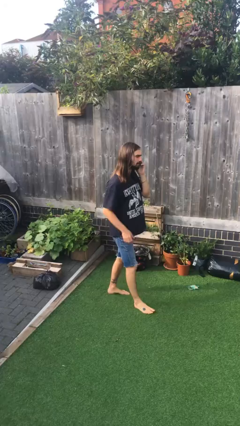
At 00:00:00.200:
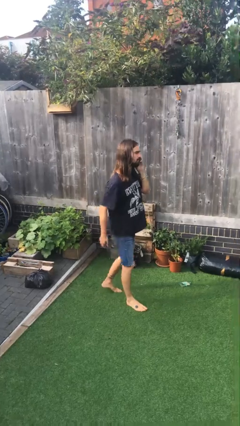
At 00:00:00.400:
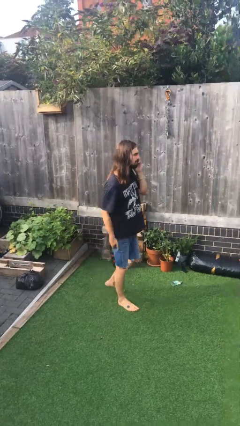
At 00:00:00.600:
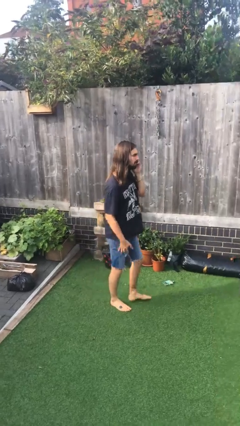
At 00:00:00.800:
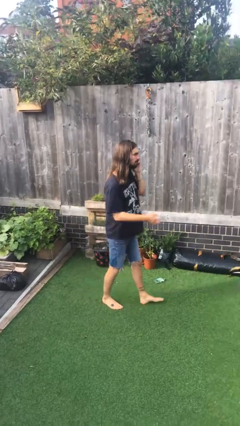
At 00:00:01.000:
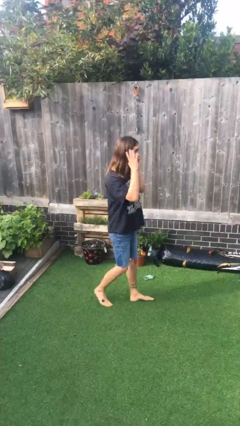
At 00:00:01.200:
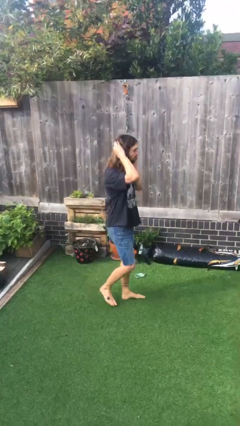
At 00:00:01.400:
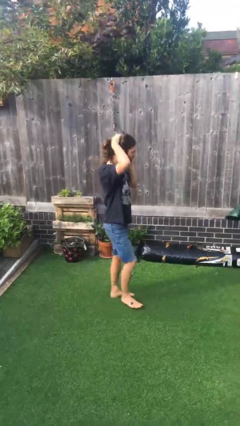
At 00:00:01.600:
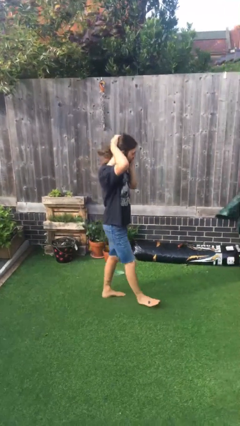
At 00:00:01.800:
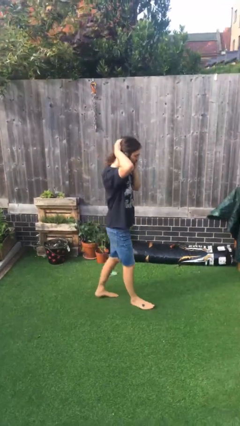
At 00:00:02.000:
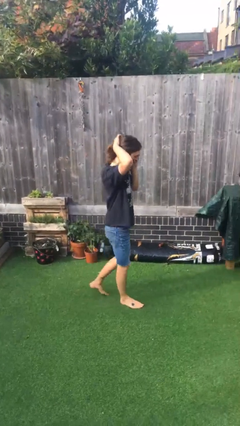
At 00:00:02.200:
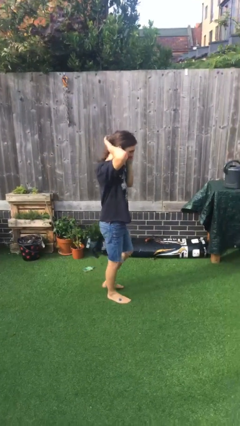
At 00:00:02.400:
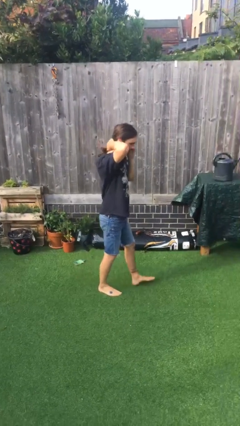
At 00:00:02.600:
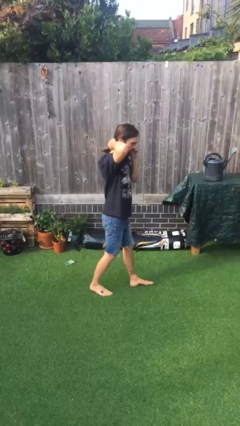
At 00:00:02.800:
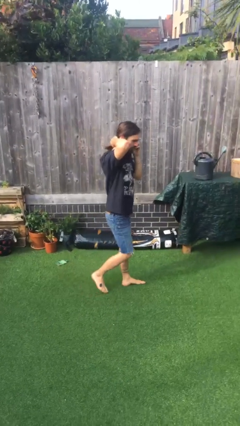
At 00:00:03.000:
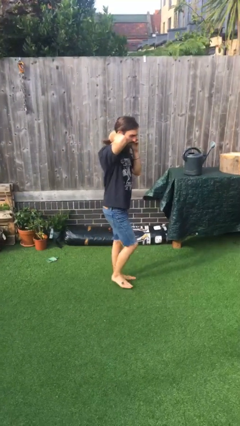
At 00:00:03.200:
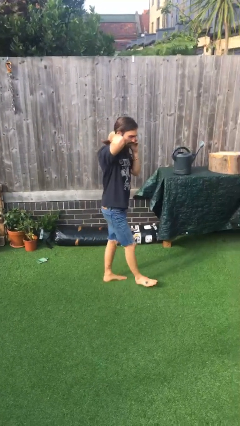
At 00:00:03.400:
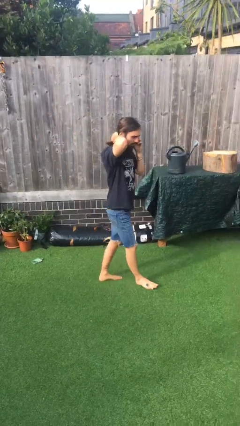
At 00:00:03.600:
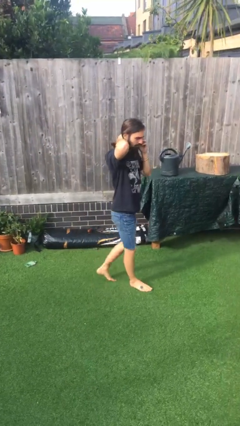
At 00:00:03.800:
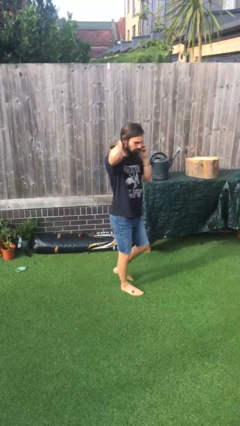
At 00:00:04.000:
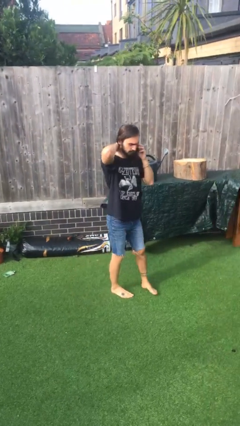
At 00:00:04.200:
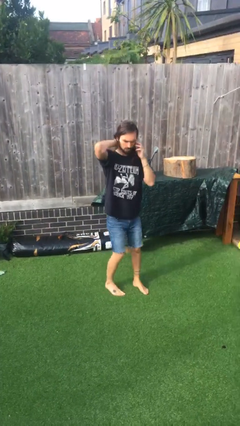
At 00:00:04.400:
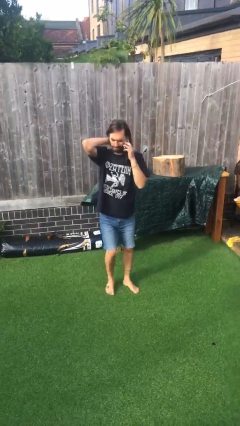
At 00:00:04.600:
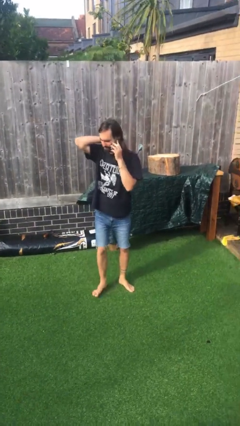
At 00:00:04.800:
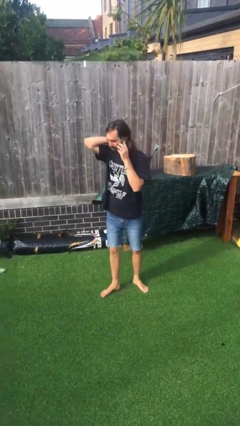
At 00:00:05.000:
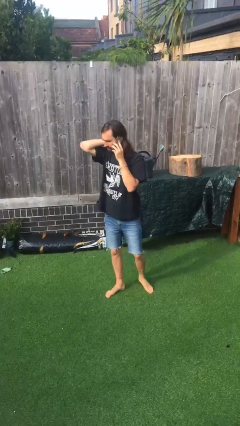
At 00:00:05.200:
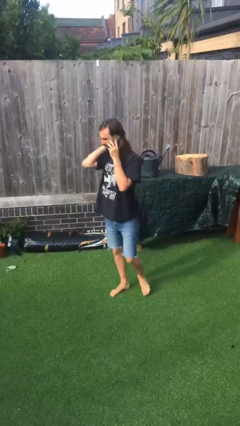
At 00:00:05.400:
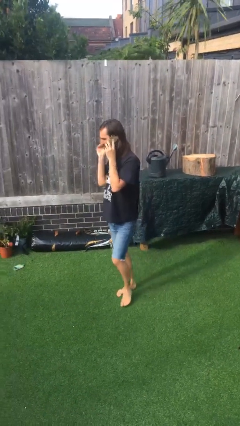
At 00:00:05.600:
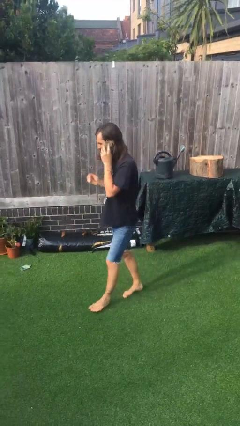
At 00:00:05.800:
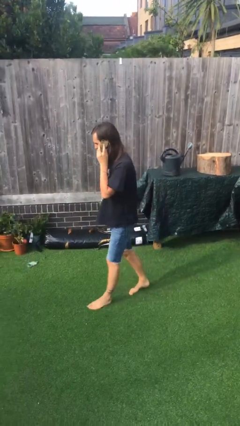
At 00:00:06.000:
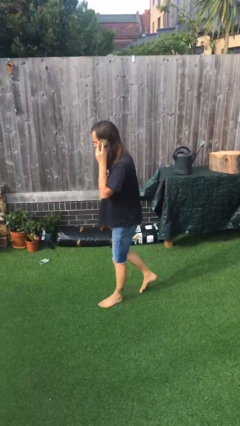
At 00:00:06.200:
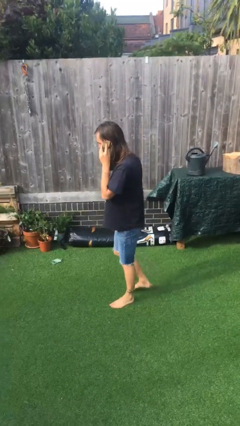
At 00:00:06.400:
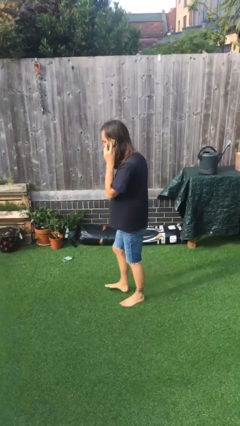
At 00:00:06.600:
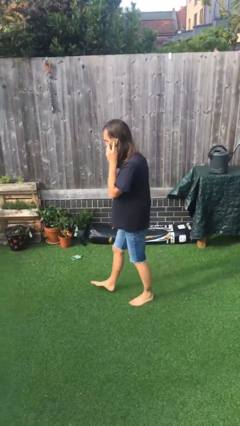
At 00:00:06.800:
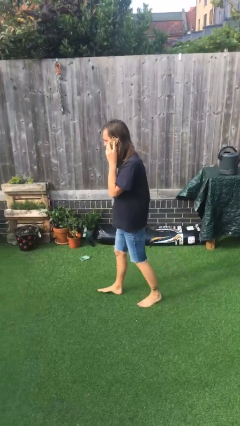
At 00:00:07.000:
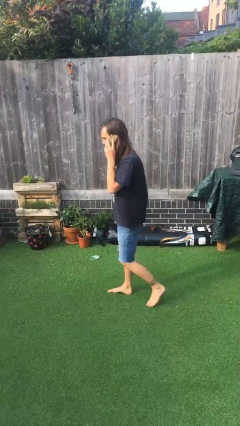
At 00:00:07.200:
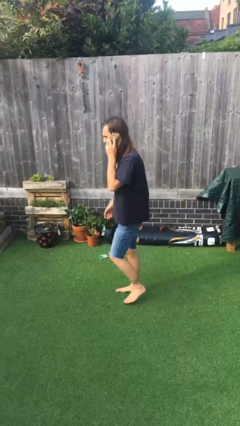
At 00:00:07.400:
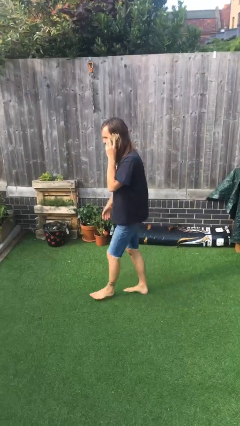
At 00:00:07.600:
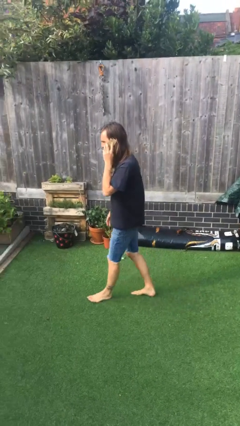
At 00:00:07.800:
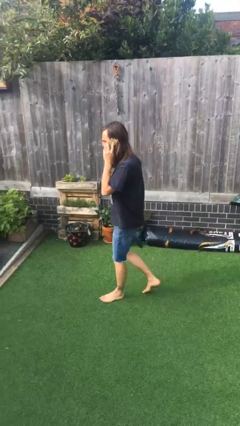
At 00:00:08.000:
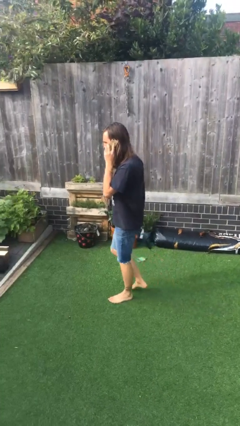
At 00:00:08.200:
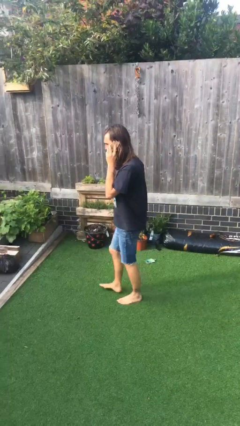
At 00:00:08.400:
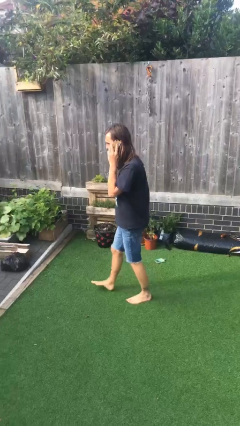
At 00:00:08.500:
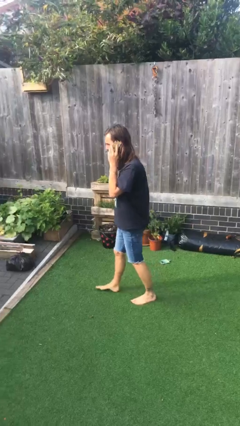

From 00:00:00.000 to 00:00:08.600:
person talks on phone

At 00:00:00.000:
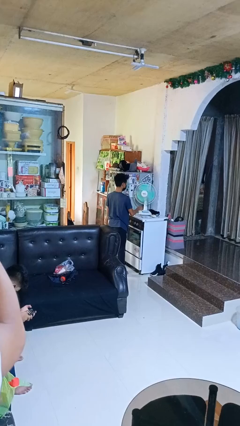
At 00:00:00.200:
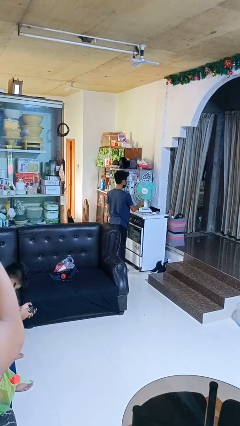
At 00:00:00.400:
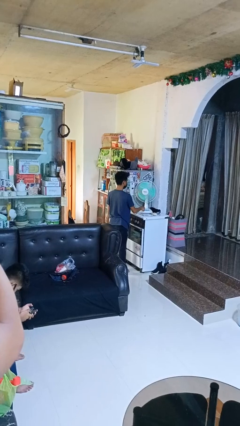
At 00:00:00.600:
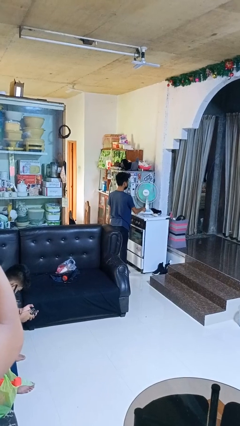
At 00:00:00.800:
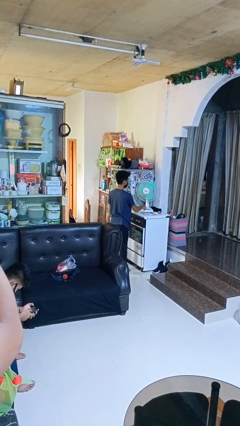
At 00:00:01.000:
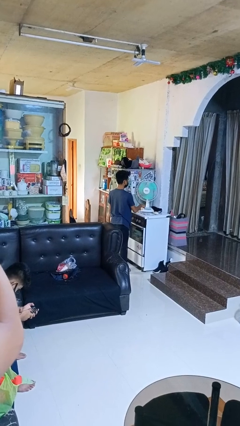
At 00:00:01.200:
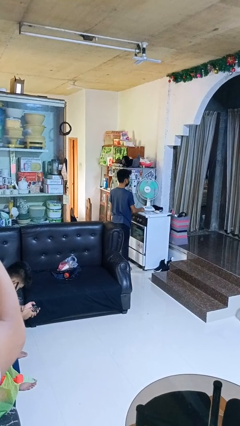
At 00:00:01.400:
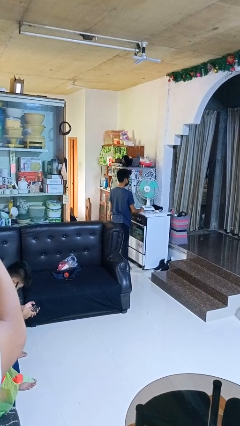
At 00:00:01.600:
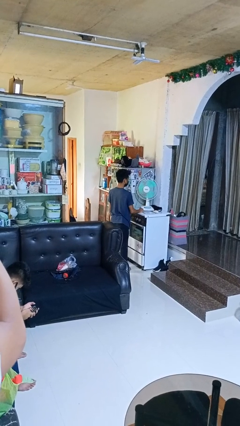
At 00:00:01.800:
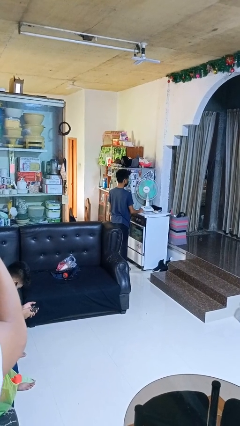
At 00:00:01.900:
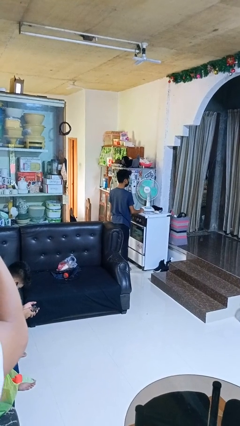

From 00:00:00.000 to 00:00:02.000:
person turns off fan

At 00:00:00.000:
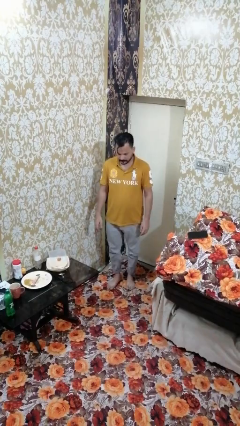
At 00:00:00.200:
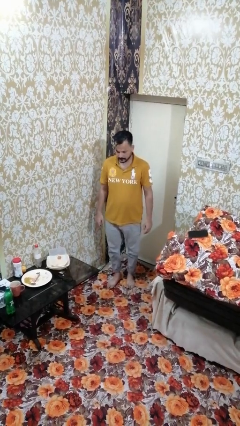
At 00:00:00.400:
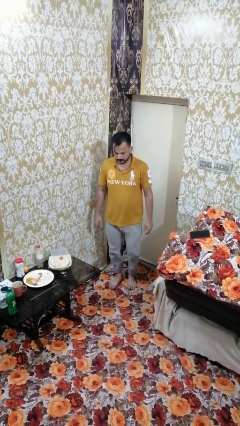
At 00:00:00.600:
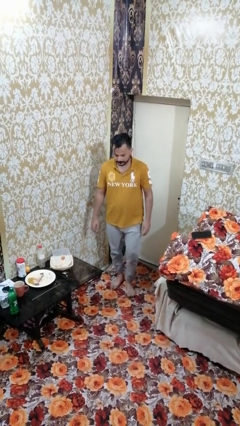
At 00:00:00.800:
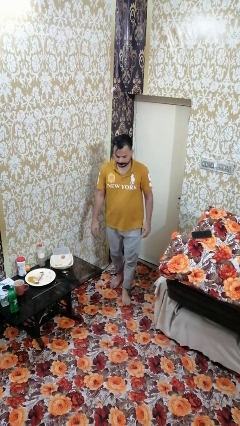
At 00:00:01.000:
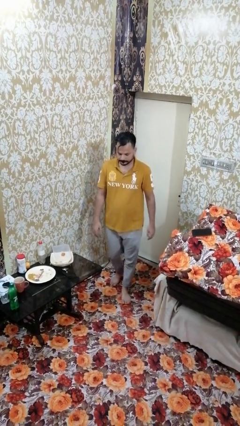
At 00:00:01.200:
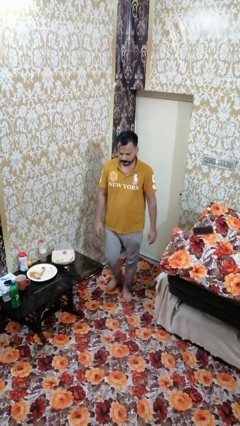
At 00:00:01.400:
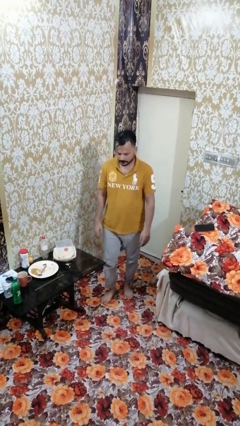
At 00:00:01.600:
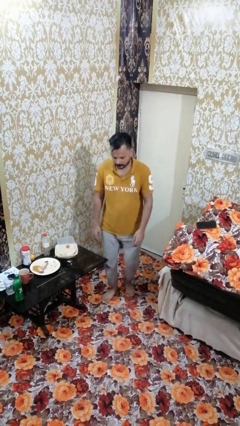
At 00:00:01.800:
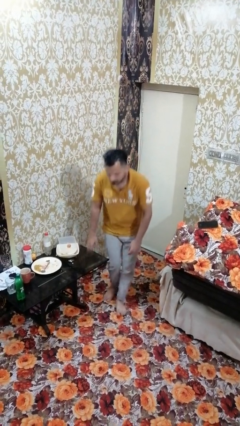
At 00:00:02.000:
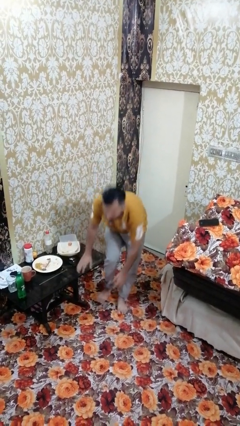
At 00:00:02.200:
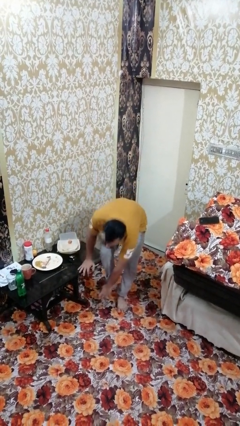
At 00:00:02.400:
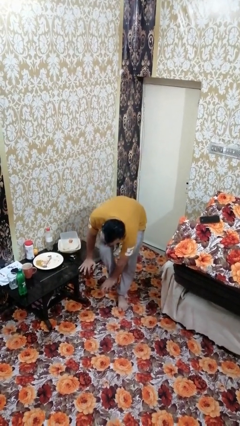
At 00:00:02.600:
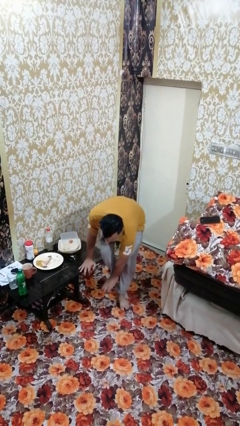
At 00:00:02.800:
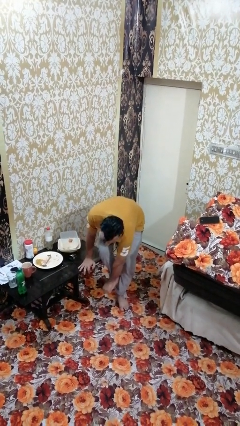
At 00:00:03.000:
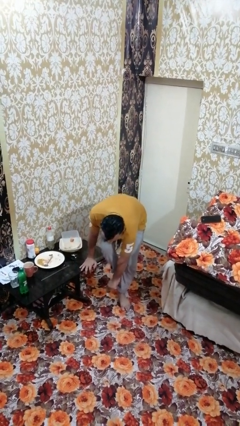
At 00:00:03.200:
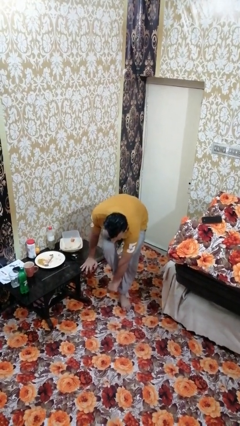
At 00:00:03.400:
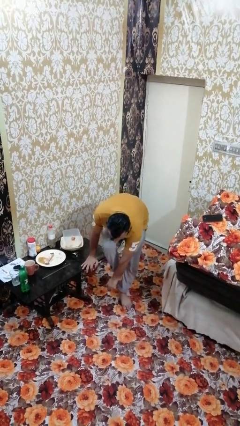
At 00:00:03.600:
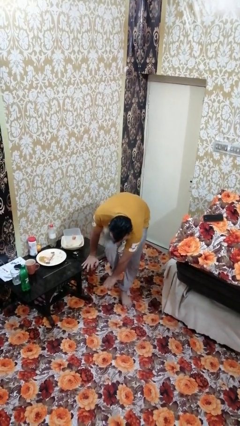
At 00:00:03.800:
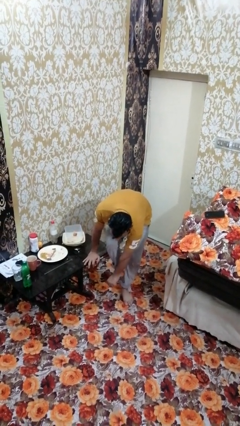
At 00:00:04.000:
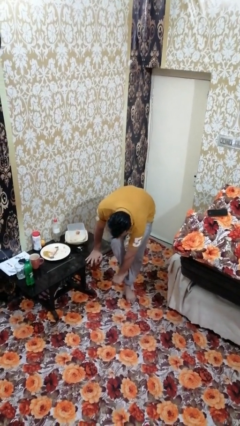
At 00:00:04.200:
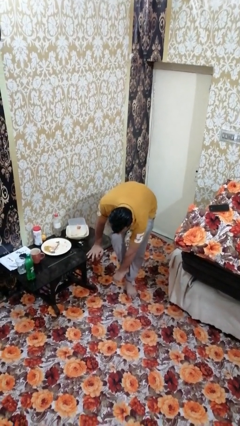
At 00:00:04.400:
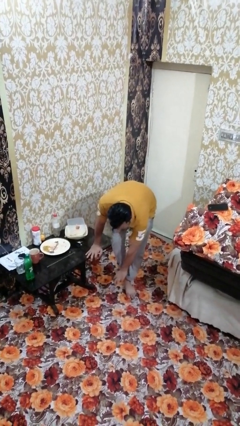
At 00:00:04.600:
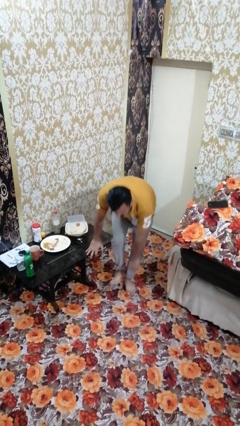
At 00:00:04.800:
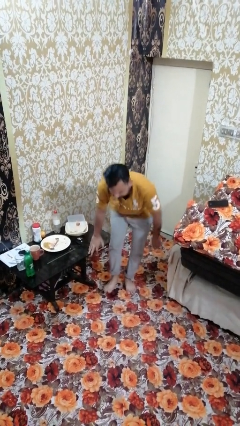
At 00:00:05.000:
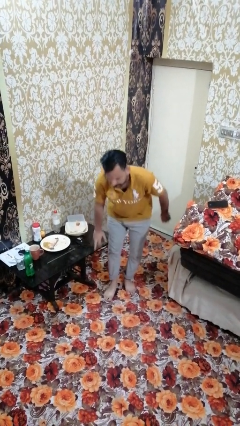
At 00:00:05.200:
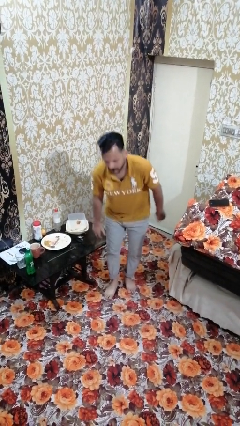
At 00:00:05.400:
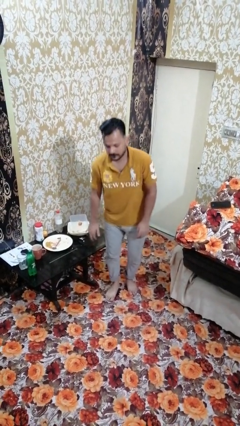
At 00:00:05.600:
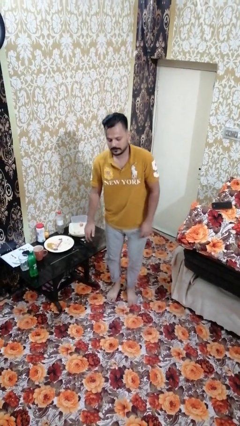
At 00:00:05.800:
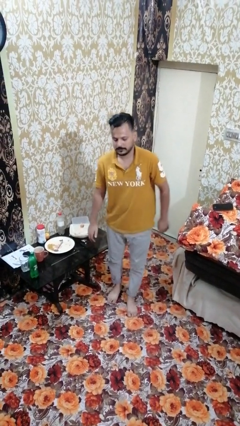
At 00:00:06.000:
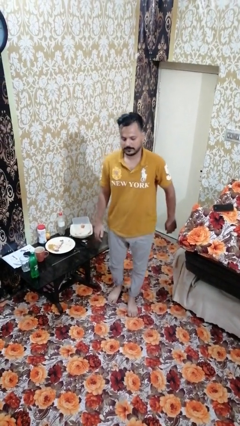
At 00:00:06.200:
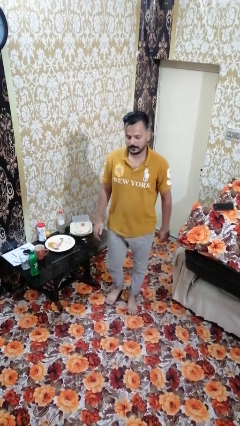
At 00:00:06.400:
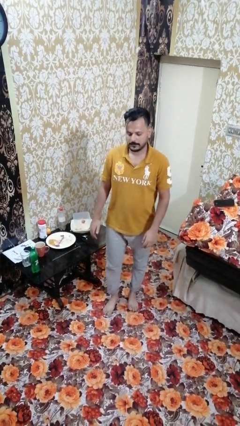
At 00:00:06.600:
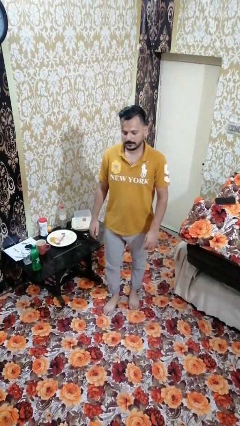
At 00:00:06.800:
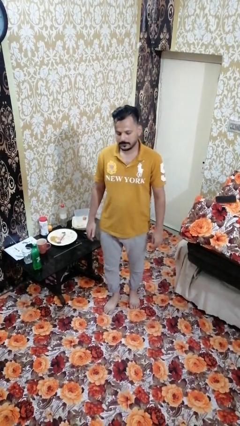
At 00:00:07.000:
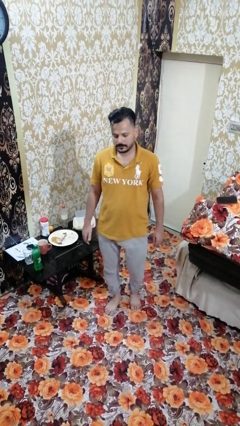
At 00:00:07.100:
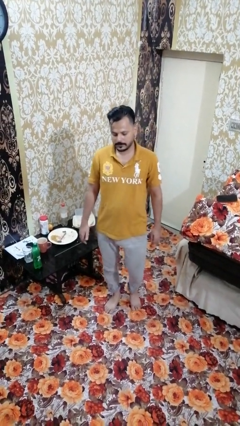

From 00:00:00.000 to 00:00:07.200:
person bumps into table
